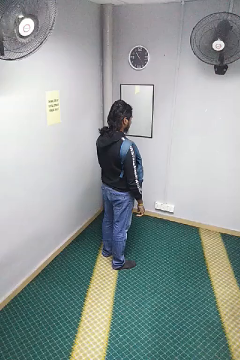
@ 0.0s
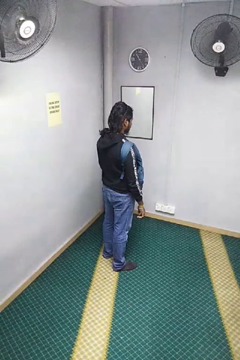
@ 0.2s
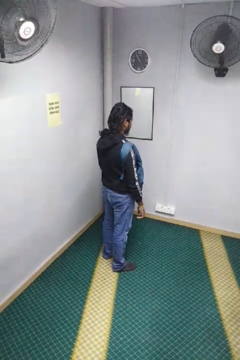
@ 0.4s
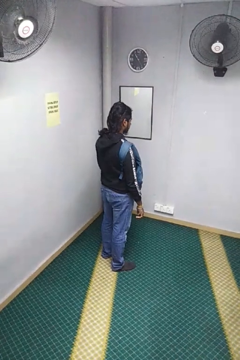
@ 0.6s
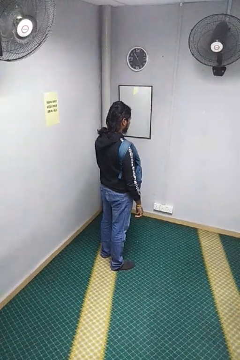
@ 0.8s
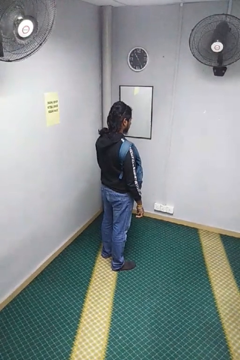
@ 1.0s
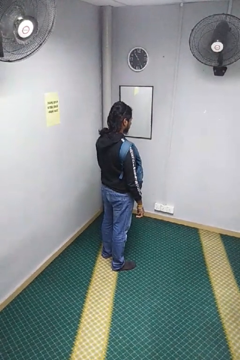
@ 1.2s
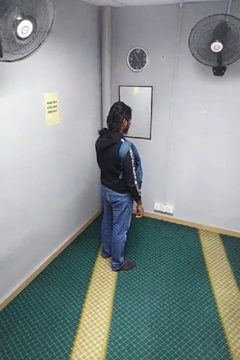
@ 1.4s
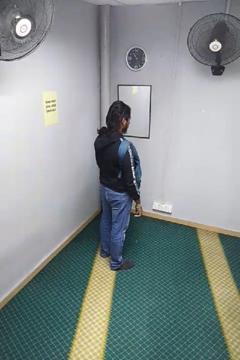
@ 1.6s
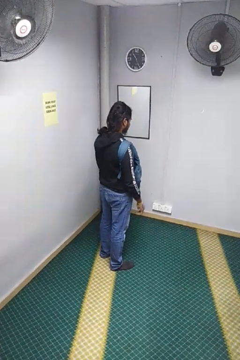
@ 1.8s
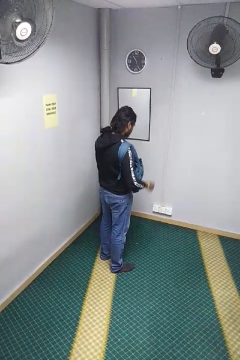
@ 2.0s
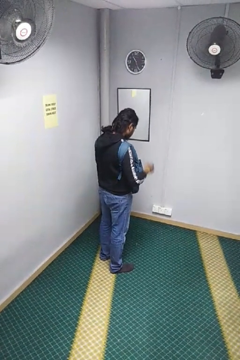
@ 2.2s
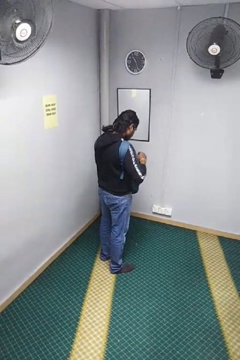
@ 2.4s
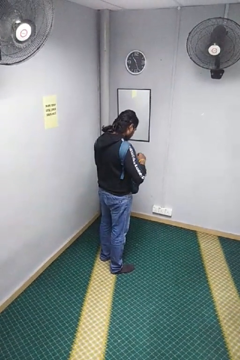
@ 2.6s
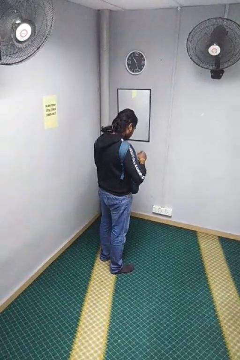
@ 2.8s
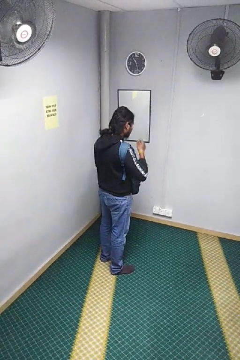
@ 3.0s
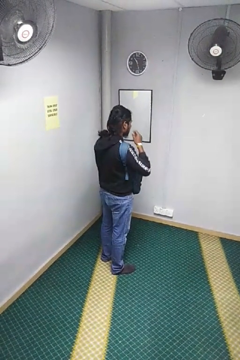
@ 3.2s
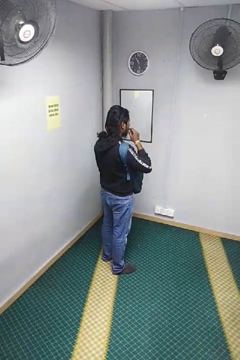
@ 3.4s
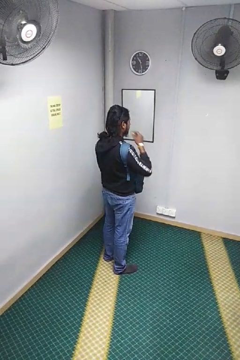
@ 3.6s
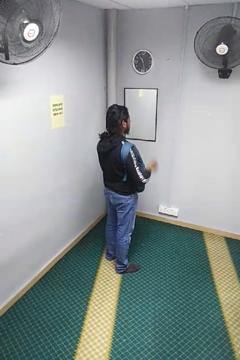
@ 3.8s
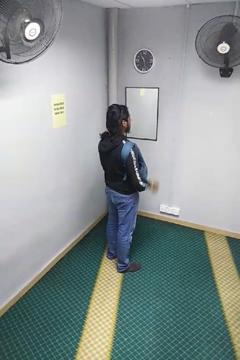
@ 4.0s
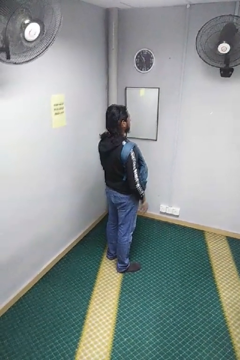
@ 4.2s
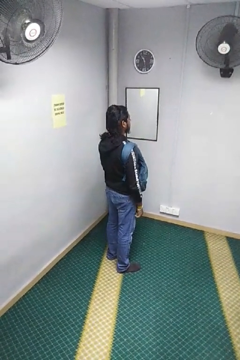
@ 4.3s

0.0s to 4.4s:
person eats snack from bag

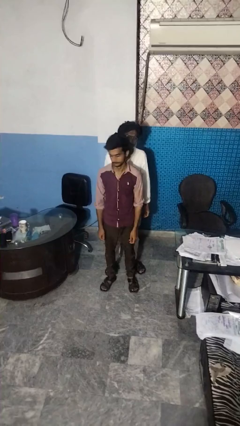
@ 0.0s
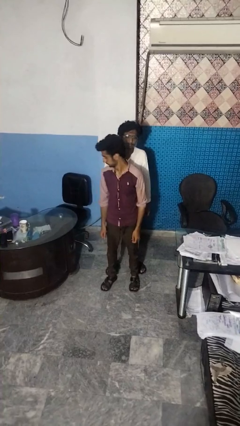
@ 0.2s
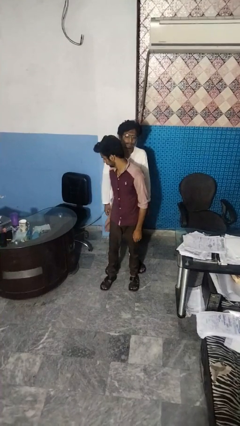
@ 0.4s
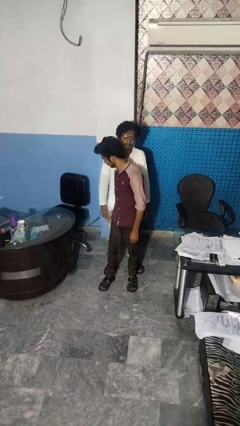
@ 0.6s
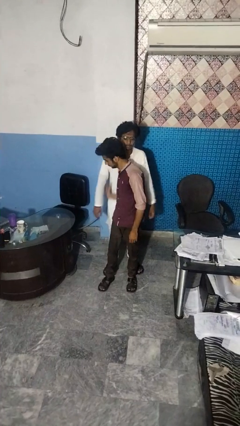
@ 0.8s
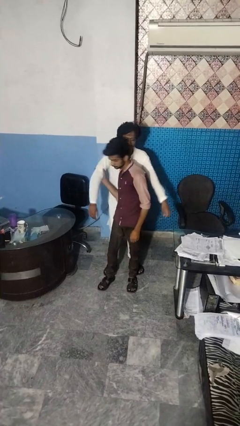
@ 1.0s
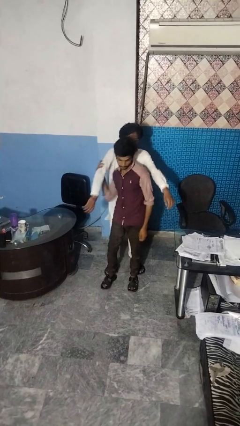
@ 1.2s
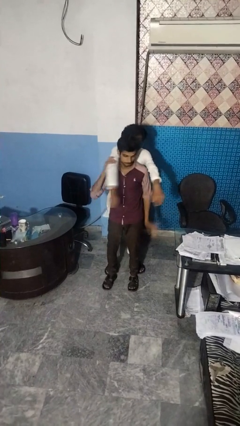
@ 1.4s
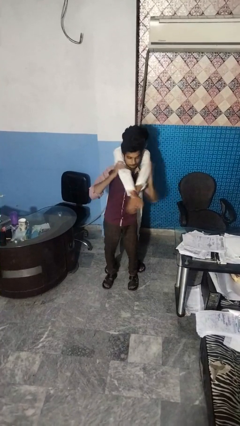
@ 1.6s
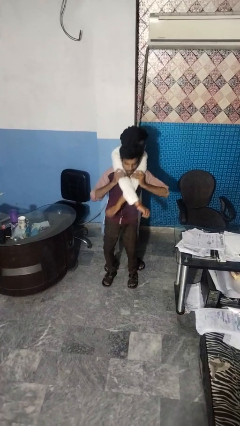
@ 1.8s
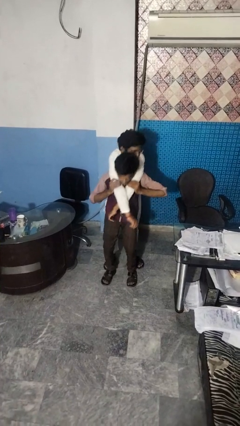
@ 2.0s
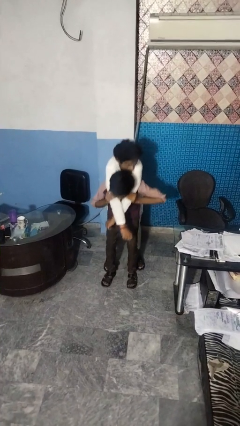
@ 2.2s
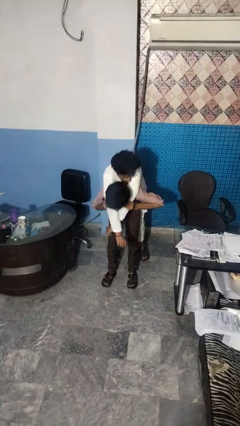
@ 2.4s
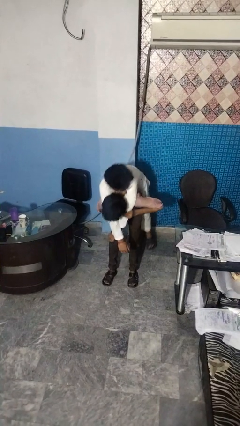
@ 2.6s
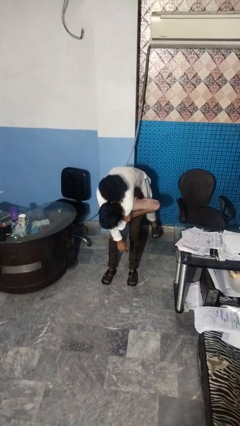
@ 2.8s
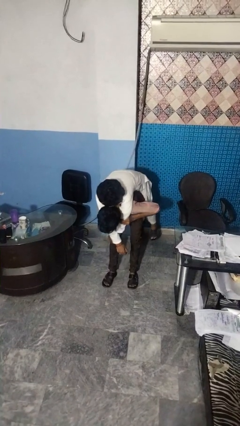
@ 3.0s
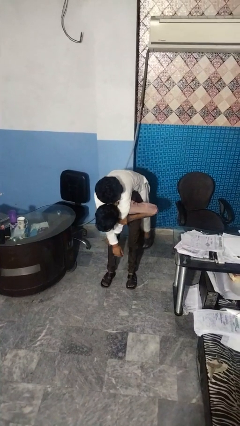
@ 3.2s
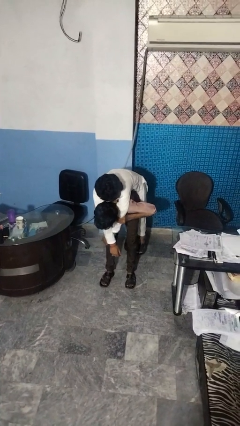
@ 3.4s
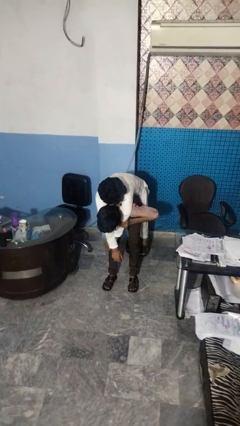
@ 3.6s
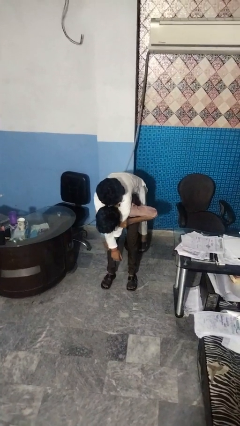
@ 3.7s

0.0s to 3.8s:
person carries person over shoulder

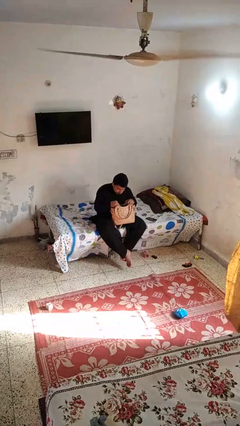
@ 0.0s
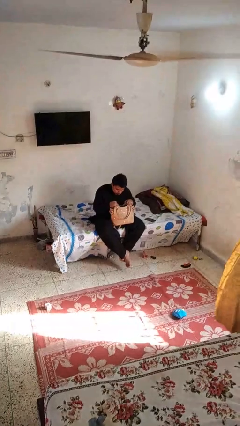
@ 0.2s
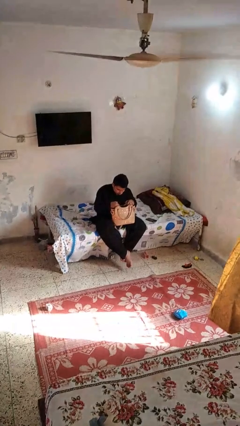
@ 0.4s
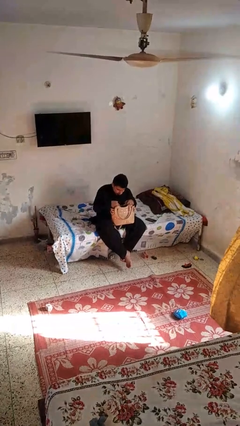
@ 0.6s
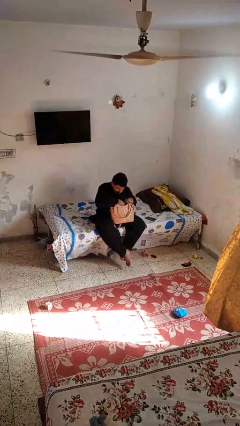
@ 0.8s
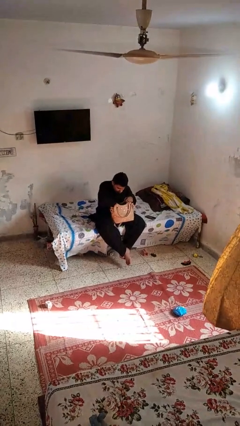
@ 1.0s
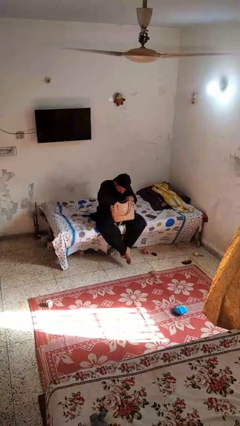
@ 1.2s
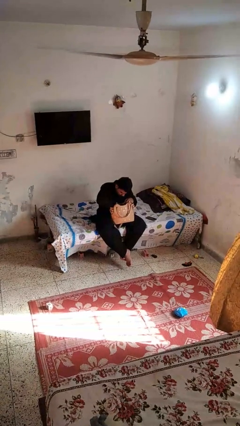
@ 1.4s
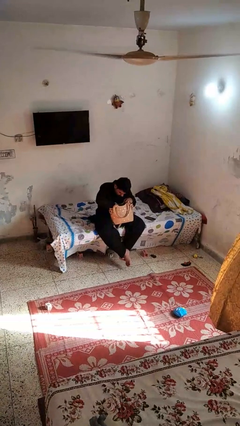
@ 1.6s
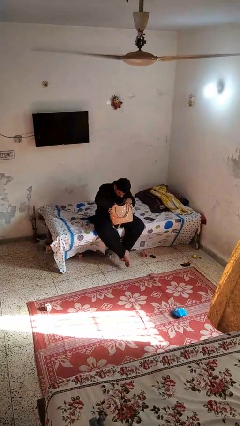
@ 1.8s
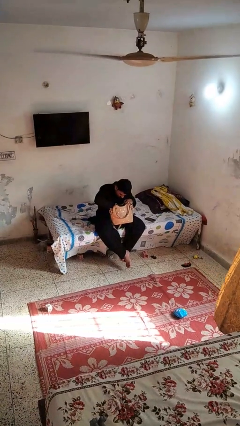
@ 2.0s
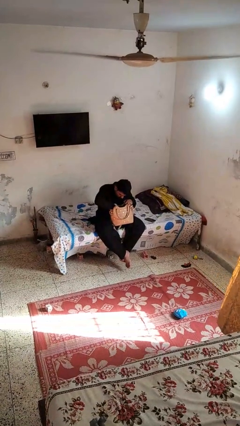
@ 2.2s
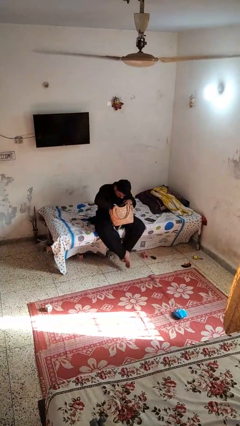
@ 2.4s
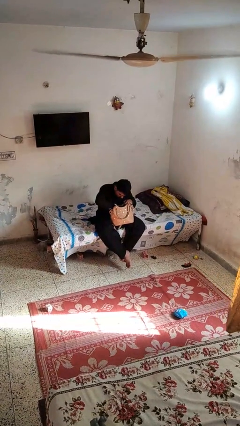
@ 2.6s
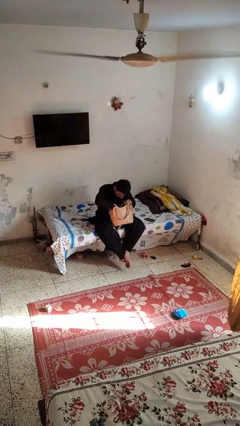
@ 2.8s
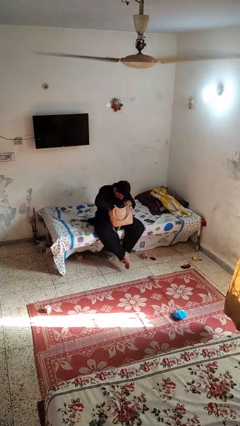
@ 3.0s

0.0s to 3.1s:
person searches in purse

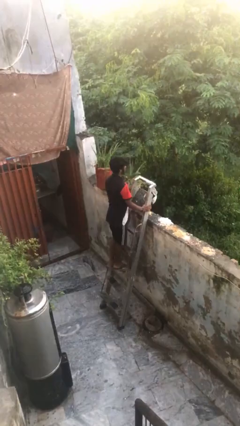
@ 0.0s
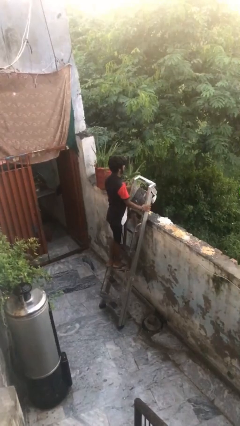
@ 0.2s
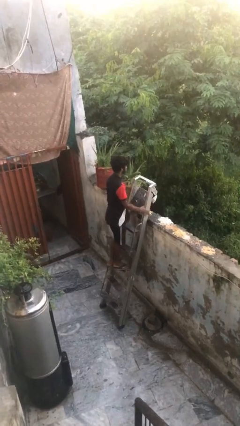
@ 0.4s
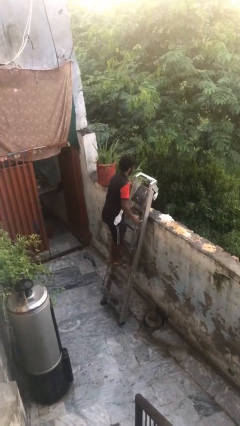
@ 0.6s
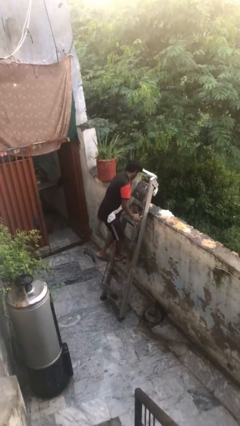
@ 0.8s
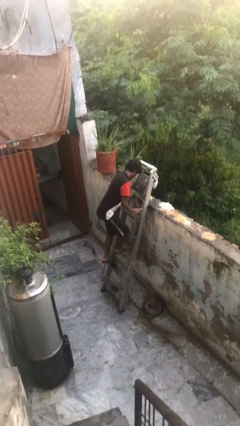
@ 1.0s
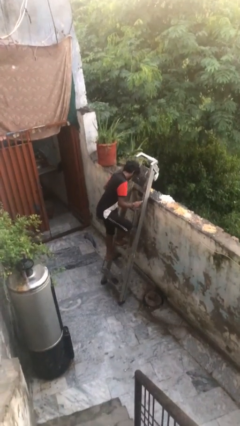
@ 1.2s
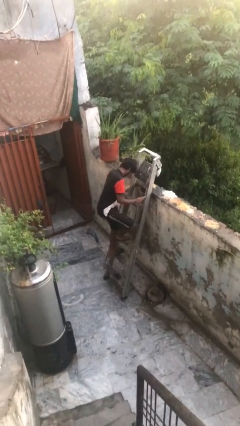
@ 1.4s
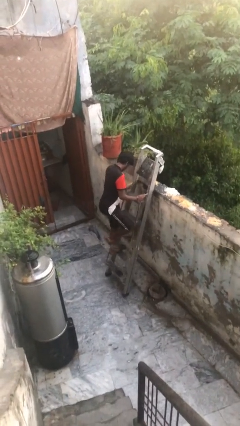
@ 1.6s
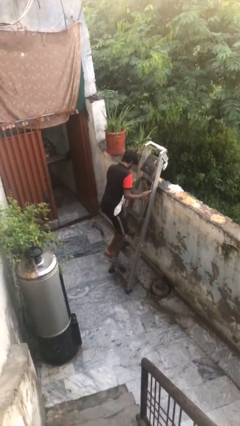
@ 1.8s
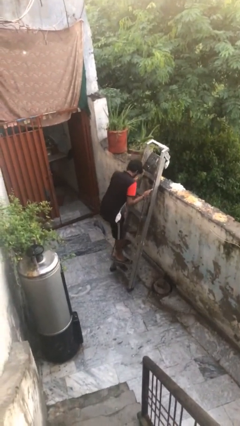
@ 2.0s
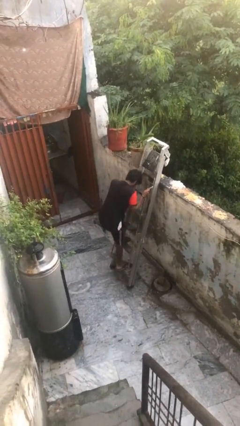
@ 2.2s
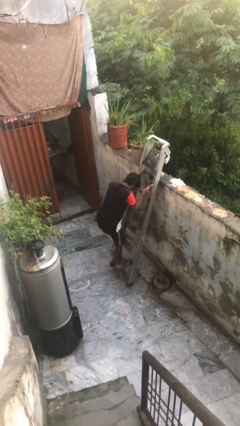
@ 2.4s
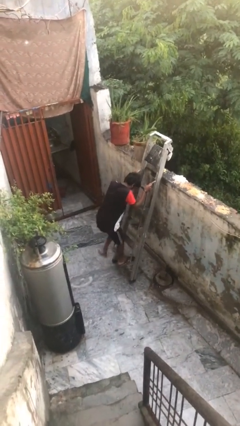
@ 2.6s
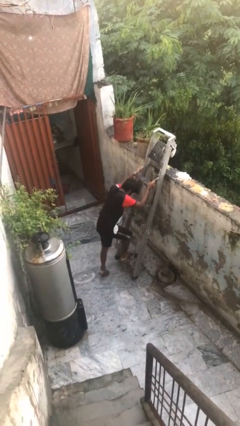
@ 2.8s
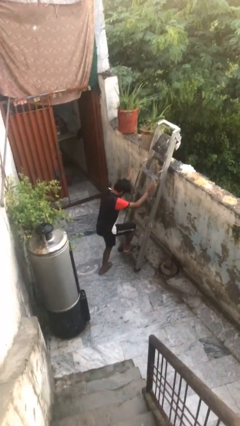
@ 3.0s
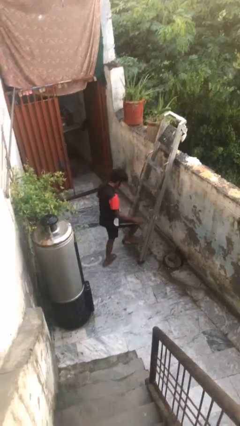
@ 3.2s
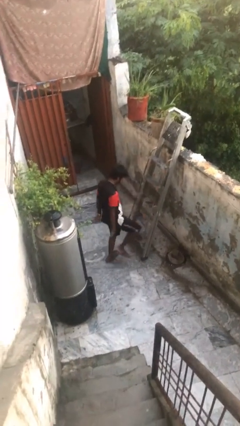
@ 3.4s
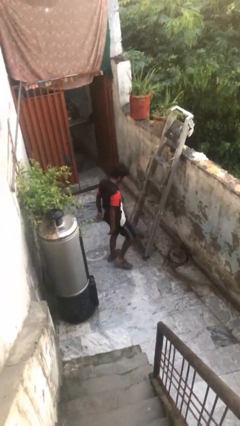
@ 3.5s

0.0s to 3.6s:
person climbs down ladder

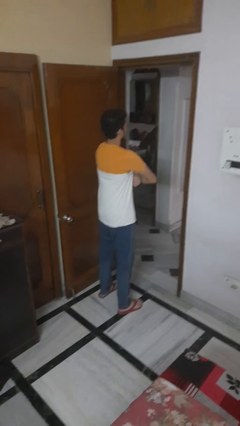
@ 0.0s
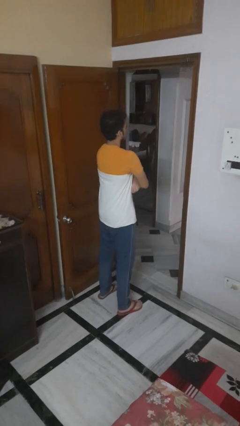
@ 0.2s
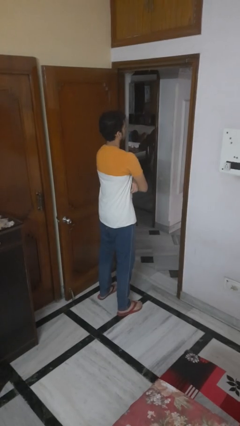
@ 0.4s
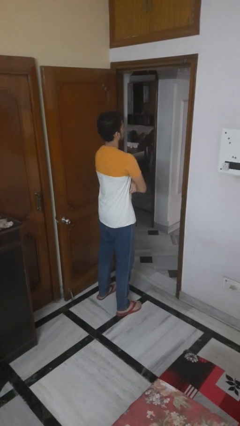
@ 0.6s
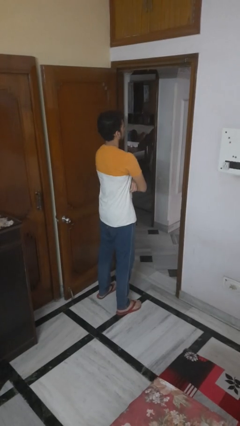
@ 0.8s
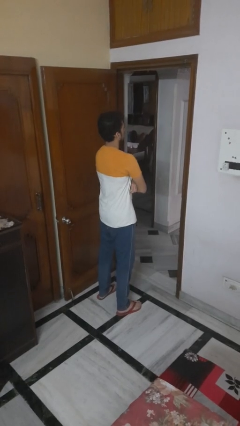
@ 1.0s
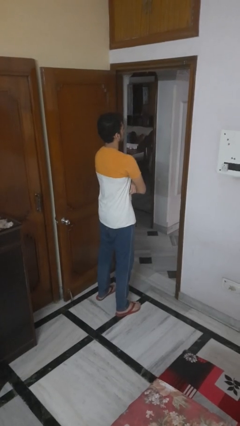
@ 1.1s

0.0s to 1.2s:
person crosses arms

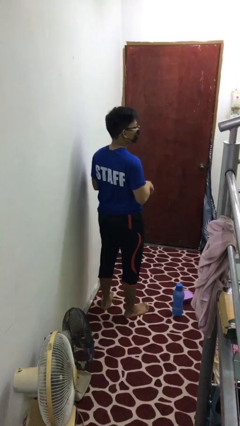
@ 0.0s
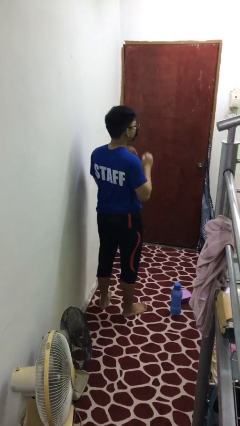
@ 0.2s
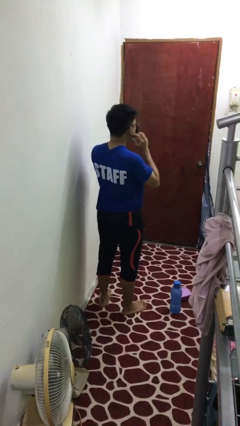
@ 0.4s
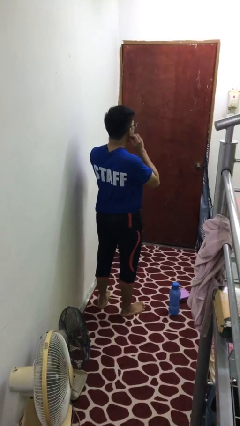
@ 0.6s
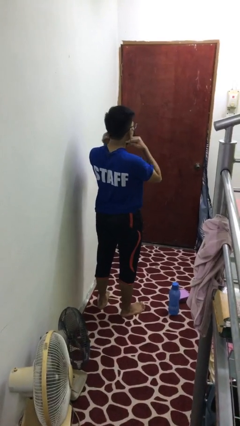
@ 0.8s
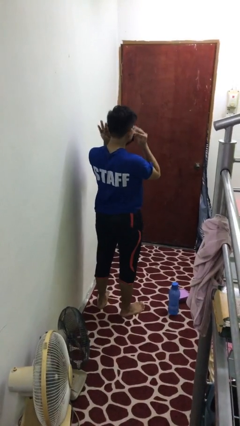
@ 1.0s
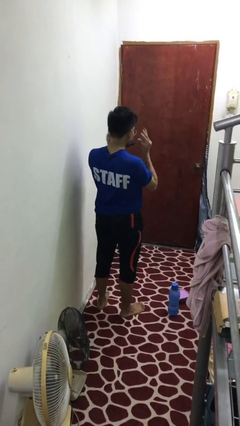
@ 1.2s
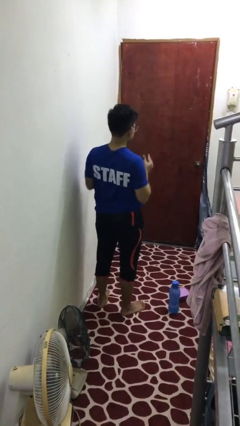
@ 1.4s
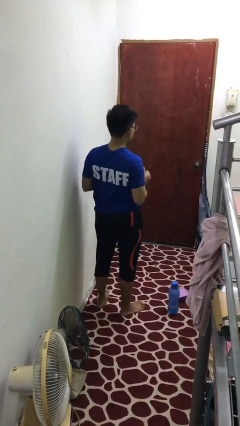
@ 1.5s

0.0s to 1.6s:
person takes off facemask

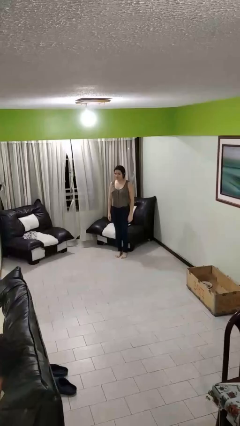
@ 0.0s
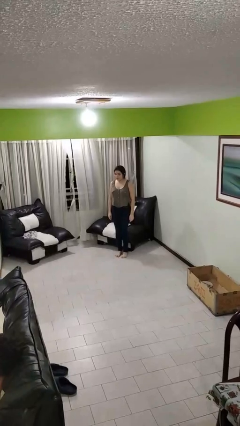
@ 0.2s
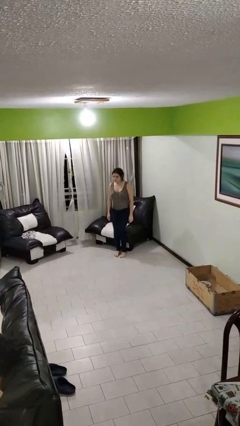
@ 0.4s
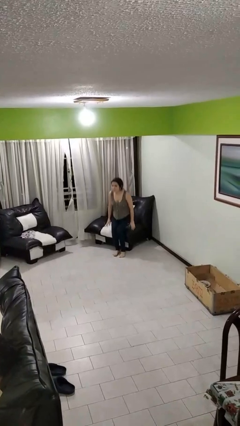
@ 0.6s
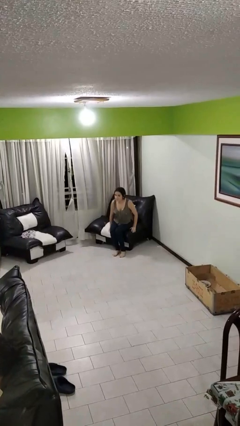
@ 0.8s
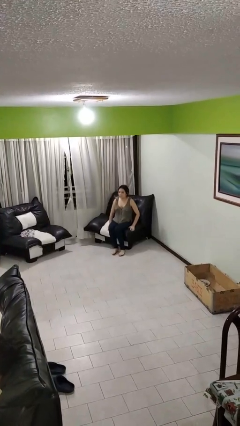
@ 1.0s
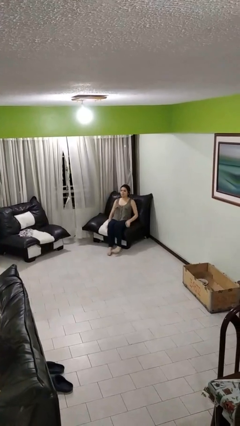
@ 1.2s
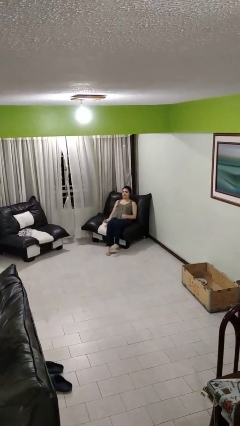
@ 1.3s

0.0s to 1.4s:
person lies down on couch
